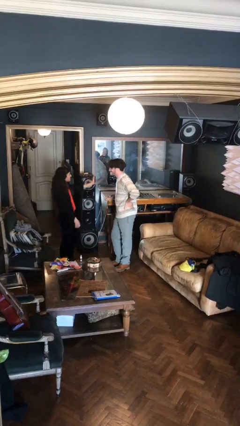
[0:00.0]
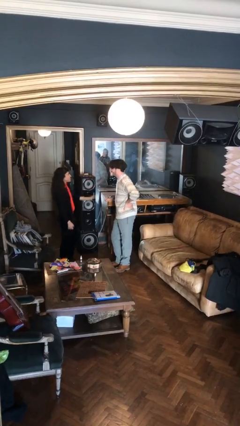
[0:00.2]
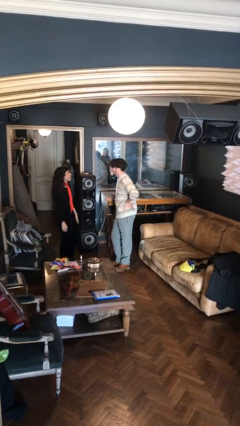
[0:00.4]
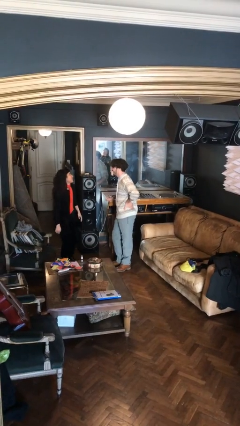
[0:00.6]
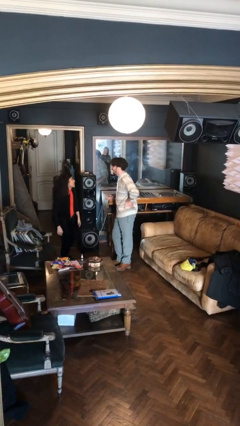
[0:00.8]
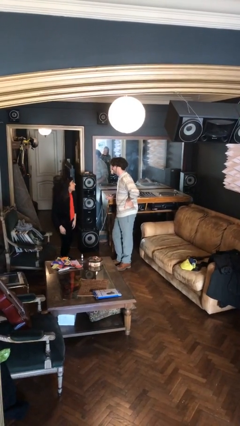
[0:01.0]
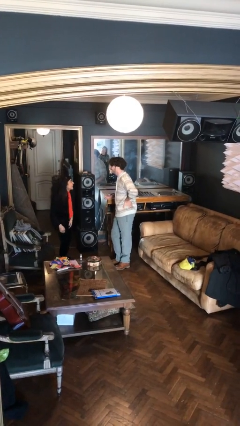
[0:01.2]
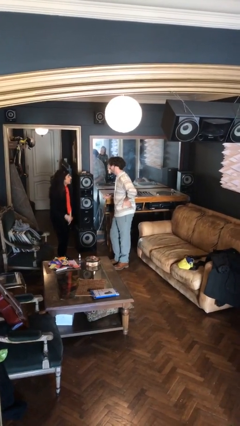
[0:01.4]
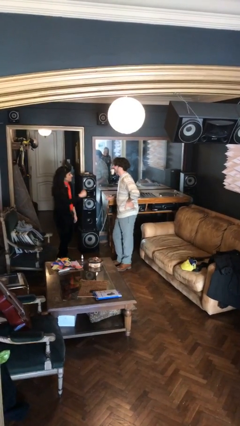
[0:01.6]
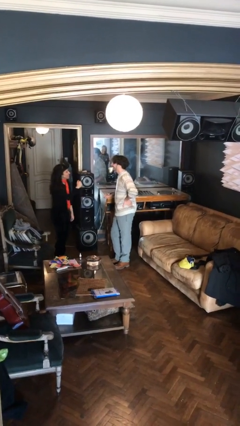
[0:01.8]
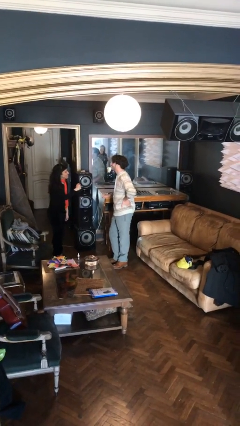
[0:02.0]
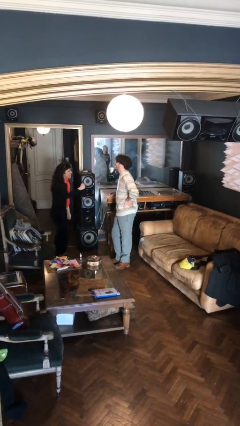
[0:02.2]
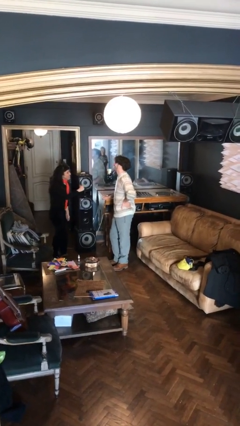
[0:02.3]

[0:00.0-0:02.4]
person talks to person

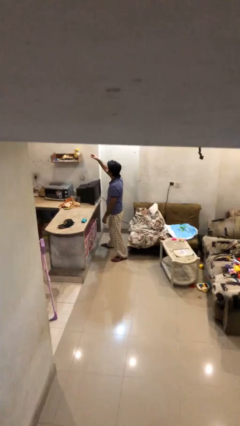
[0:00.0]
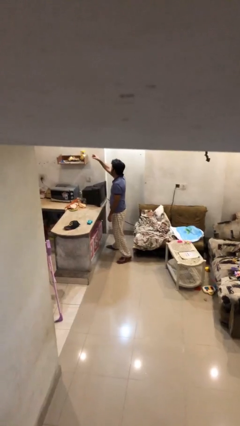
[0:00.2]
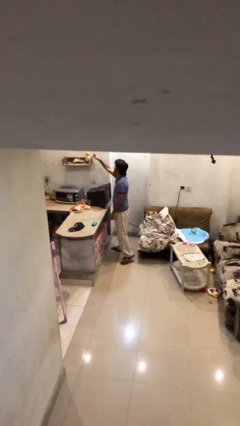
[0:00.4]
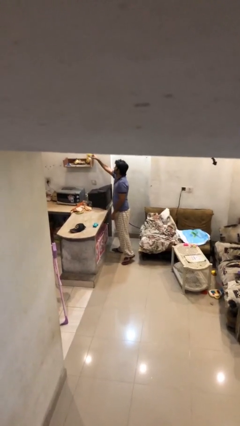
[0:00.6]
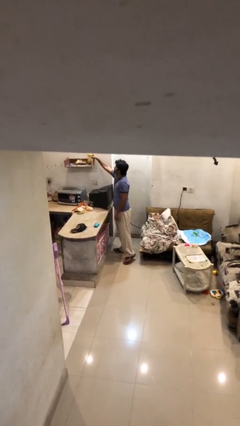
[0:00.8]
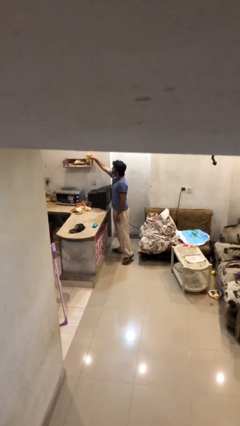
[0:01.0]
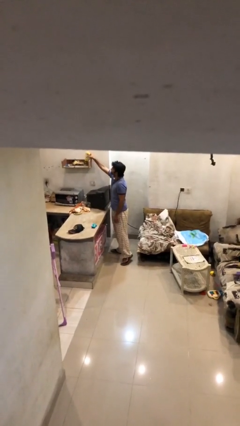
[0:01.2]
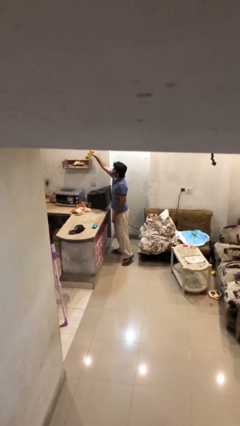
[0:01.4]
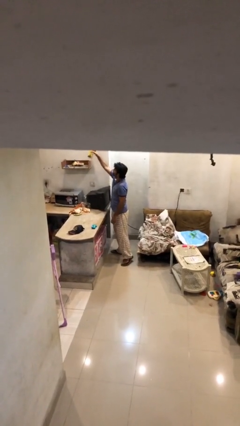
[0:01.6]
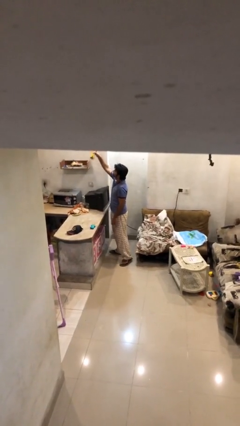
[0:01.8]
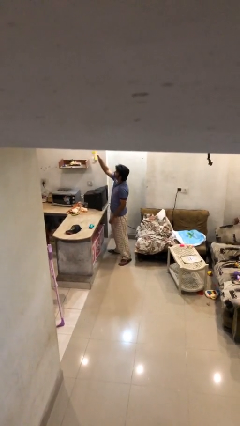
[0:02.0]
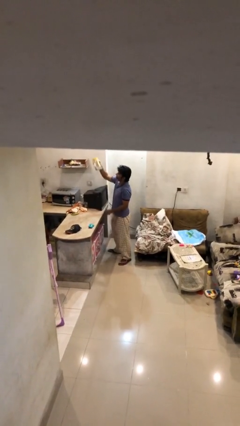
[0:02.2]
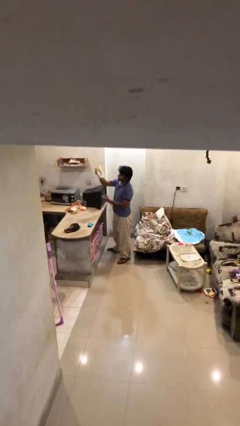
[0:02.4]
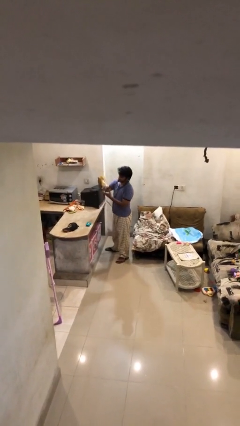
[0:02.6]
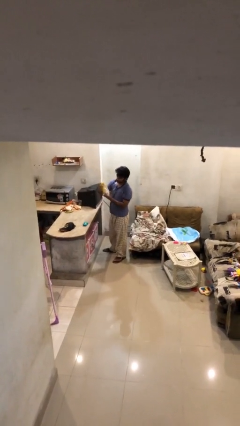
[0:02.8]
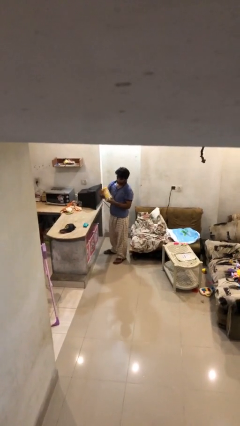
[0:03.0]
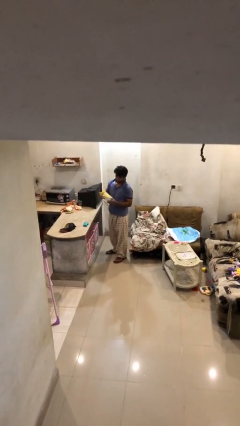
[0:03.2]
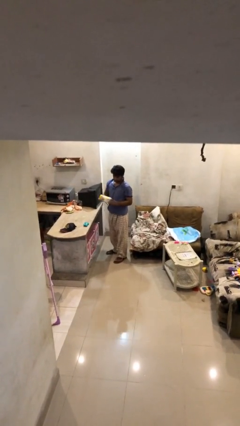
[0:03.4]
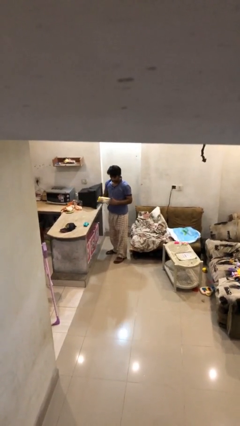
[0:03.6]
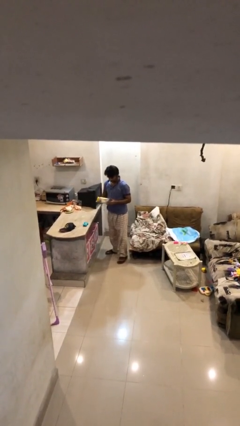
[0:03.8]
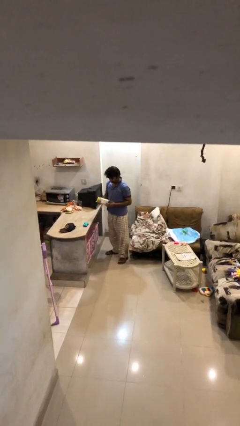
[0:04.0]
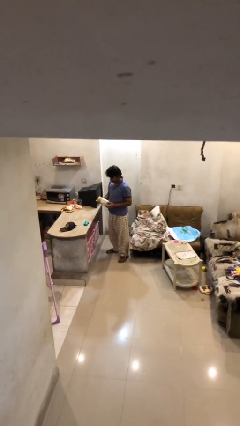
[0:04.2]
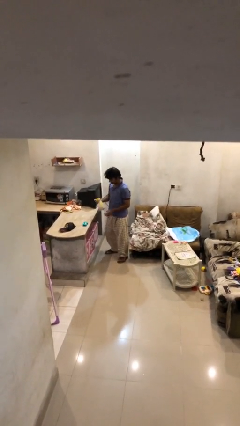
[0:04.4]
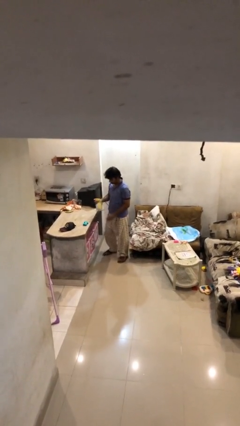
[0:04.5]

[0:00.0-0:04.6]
person picks up object from shelf

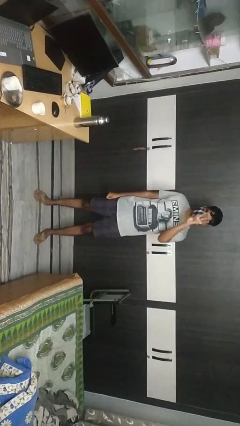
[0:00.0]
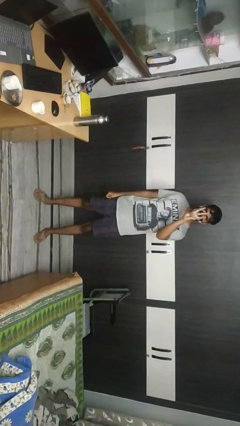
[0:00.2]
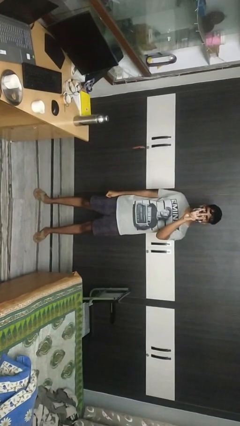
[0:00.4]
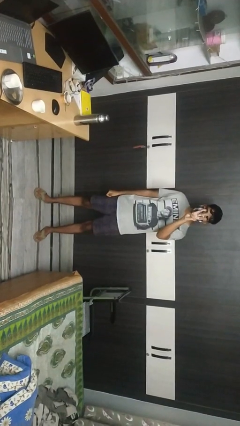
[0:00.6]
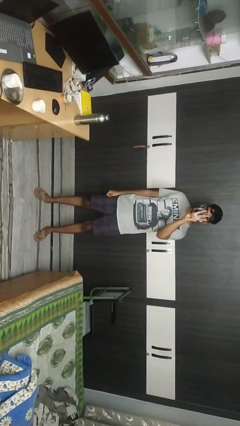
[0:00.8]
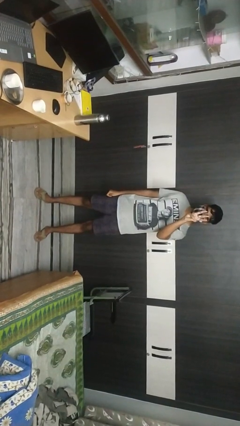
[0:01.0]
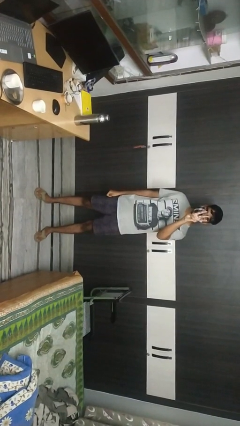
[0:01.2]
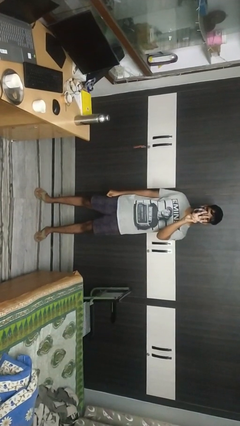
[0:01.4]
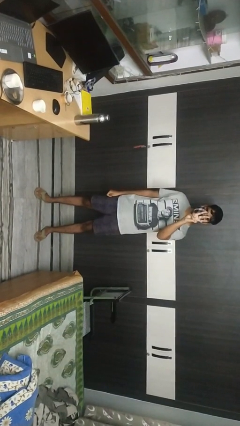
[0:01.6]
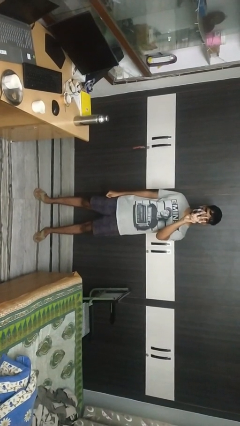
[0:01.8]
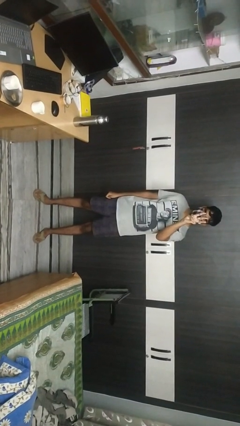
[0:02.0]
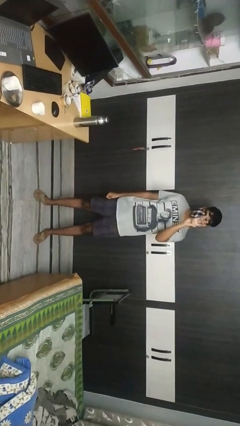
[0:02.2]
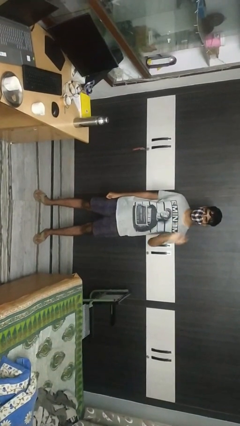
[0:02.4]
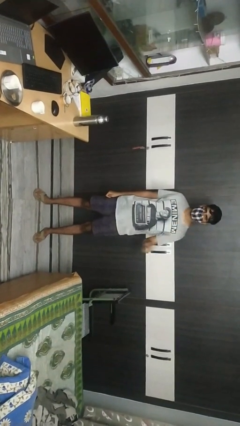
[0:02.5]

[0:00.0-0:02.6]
person gestures number three

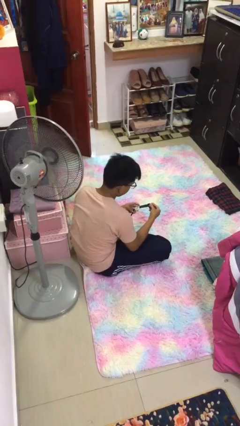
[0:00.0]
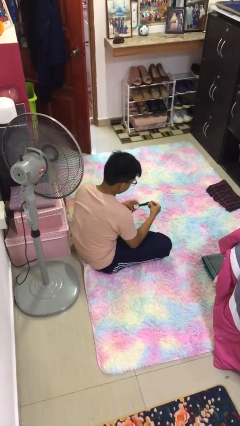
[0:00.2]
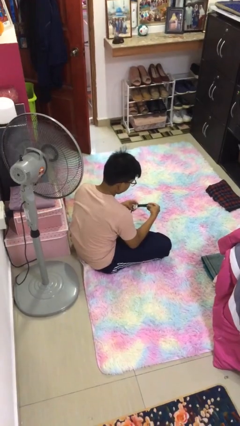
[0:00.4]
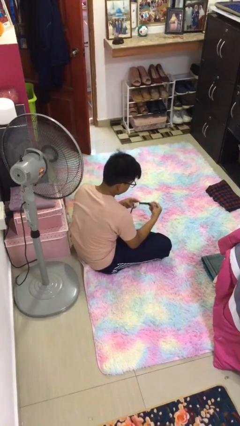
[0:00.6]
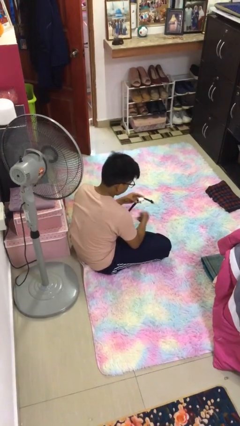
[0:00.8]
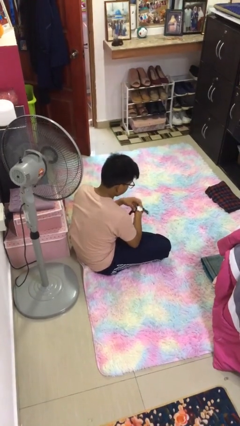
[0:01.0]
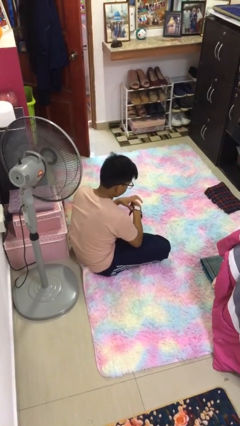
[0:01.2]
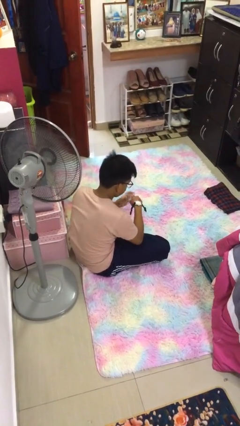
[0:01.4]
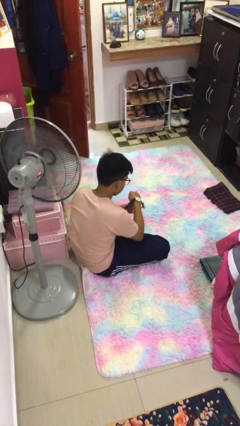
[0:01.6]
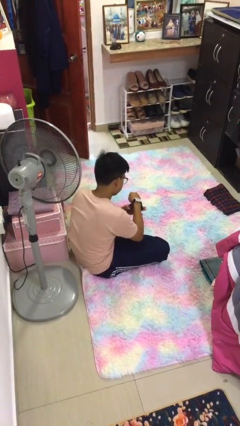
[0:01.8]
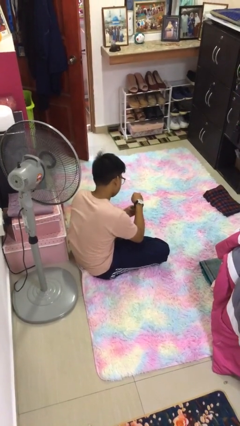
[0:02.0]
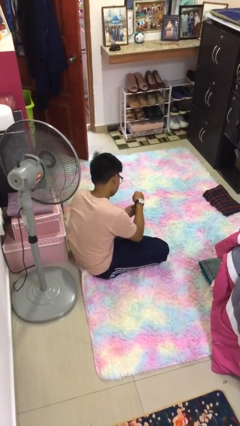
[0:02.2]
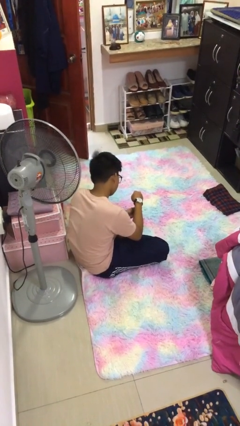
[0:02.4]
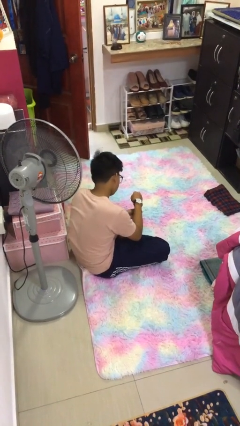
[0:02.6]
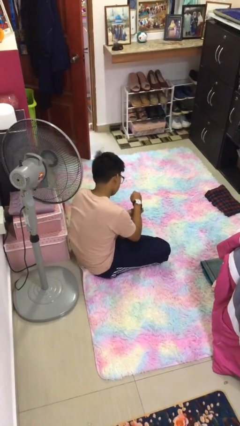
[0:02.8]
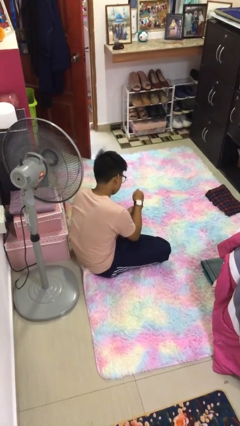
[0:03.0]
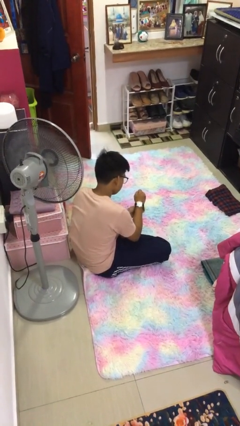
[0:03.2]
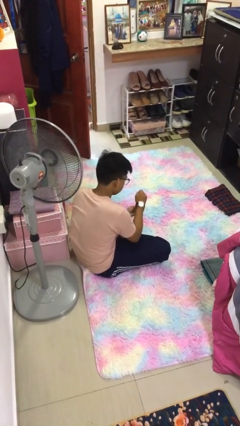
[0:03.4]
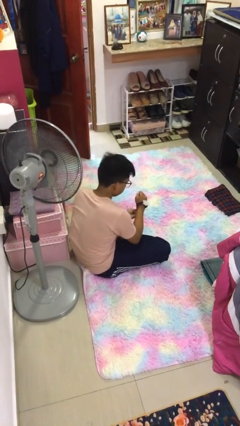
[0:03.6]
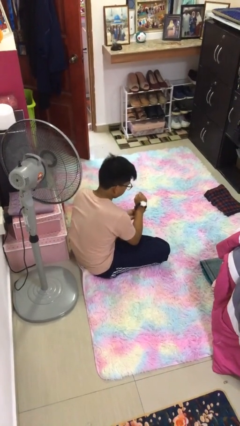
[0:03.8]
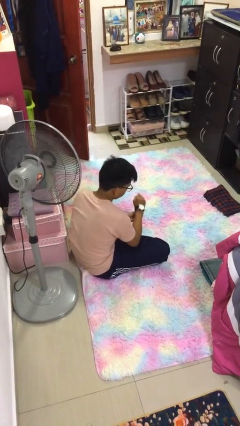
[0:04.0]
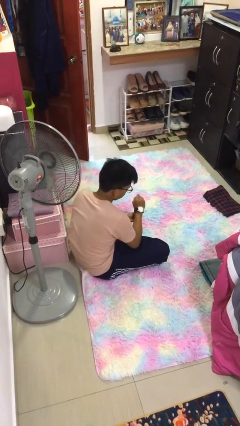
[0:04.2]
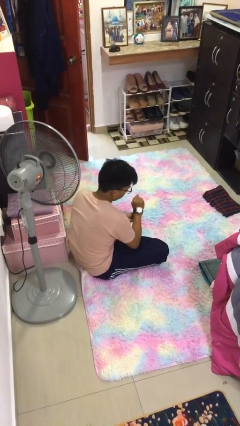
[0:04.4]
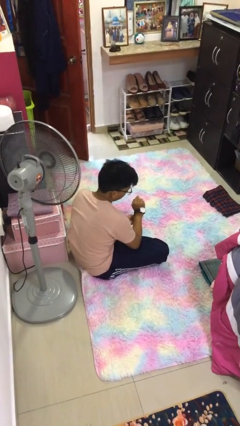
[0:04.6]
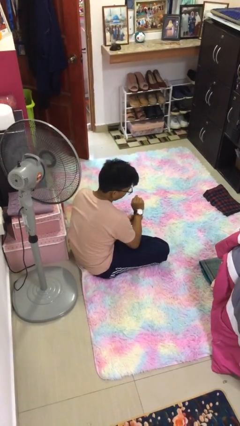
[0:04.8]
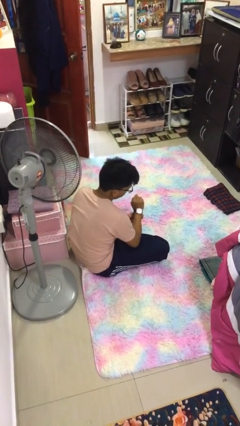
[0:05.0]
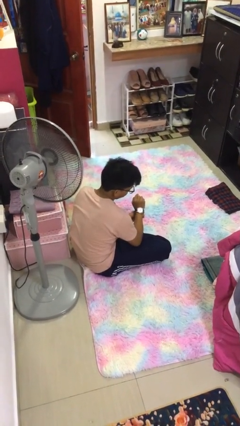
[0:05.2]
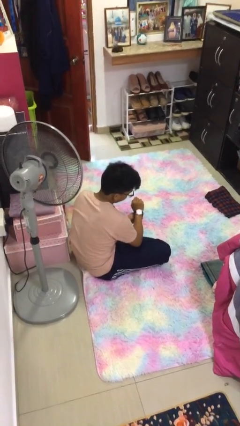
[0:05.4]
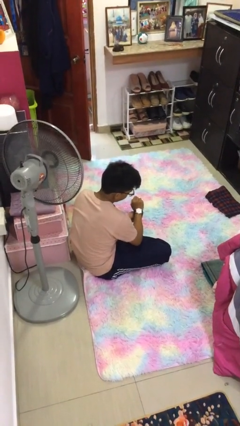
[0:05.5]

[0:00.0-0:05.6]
person puts on wristwatch

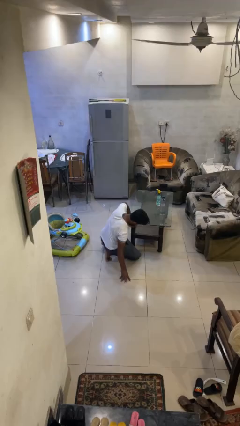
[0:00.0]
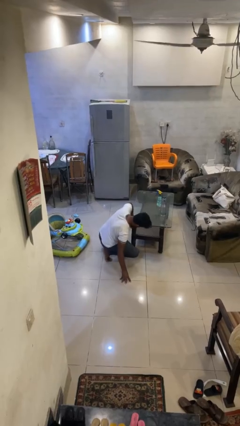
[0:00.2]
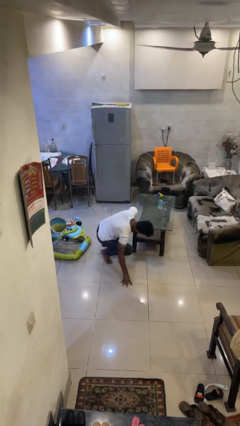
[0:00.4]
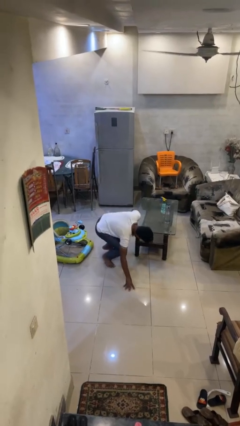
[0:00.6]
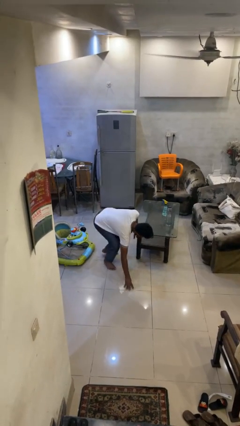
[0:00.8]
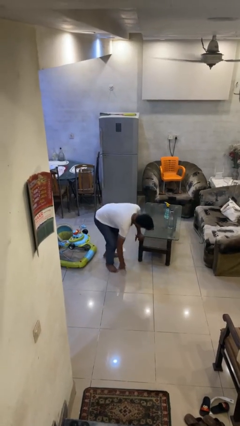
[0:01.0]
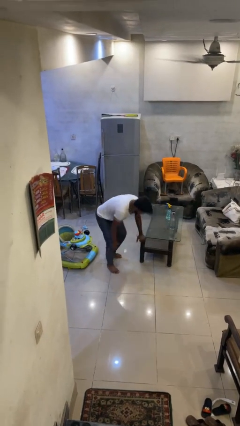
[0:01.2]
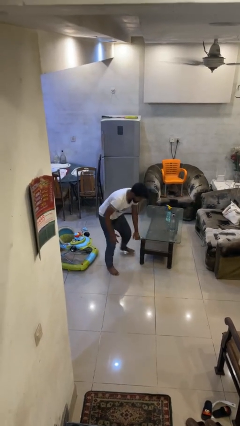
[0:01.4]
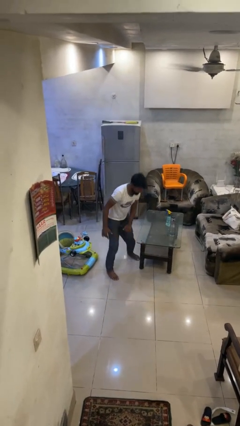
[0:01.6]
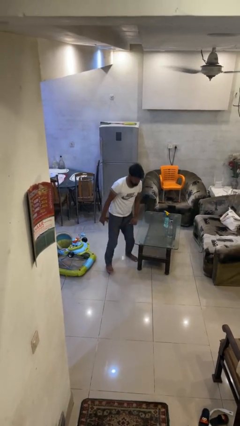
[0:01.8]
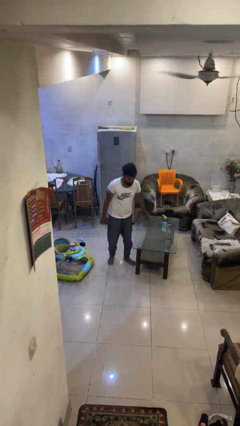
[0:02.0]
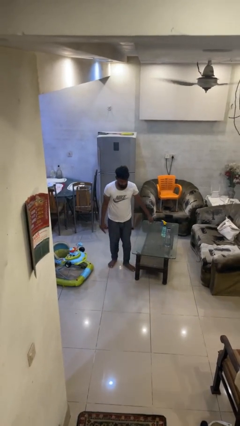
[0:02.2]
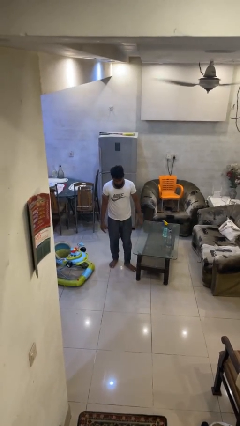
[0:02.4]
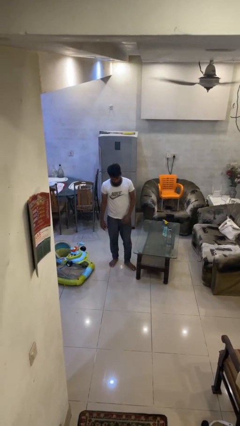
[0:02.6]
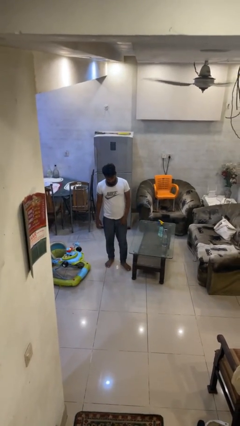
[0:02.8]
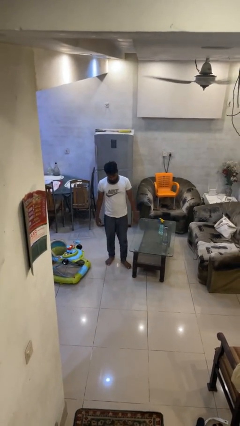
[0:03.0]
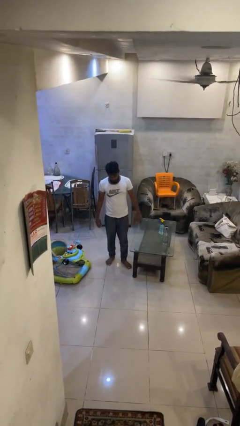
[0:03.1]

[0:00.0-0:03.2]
person stands up from floor
